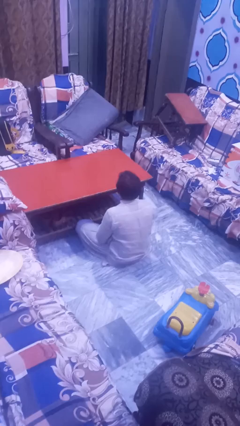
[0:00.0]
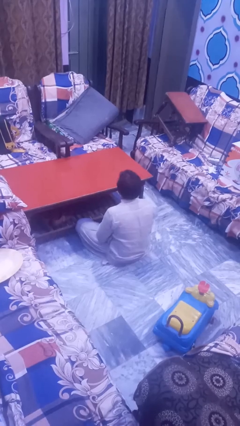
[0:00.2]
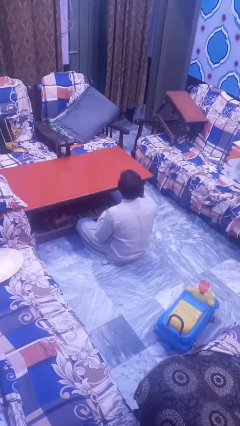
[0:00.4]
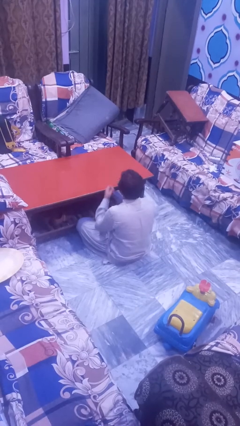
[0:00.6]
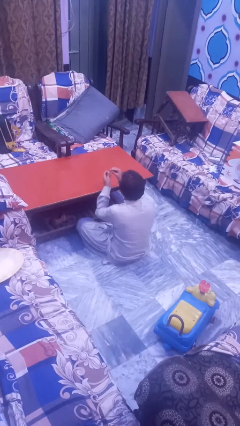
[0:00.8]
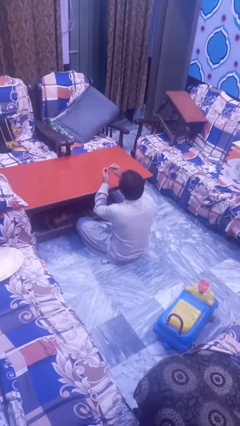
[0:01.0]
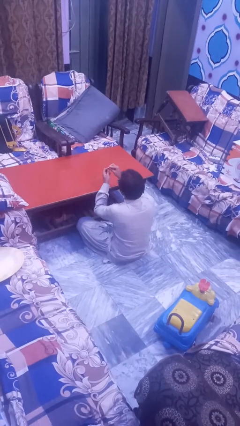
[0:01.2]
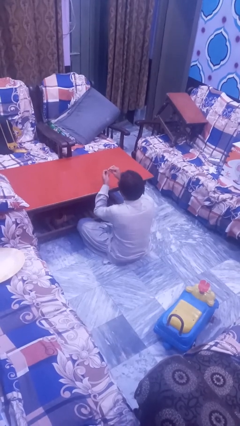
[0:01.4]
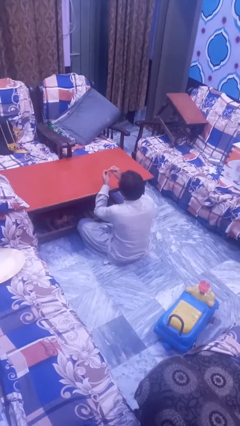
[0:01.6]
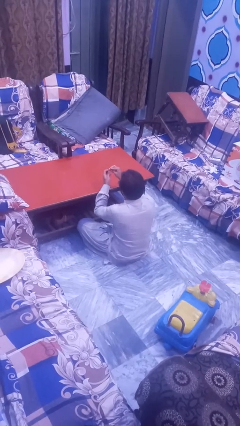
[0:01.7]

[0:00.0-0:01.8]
person files fingernails

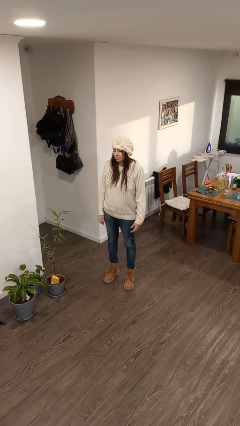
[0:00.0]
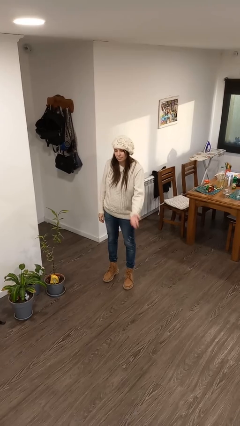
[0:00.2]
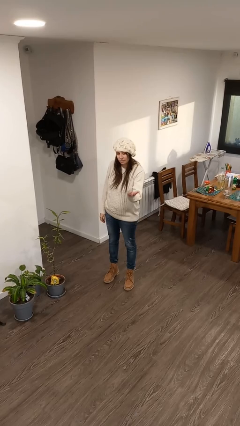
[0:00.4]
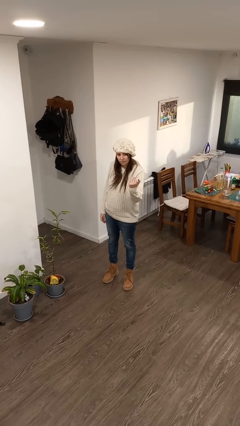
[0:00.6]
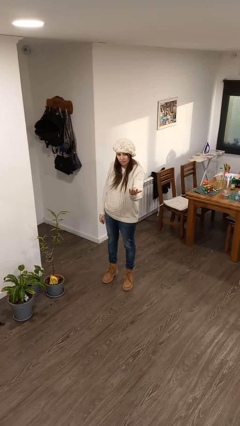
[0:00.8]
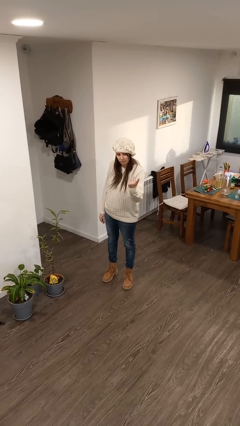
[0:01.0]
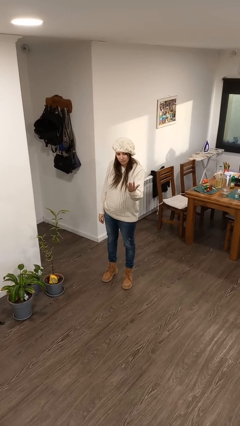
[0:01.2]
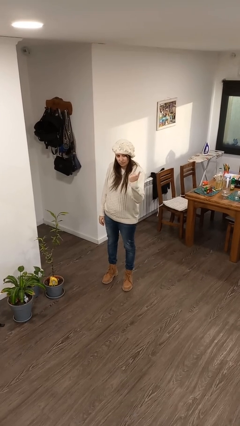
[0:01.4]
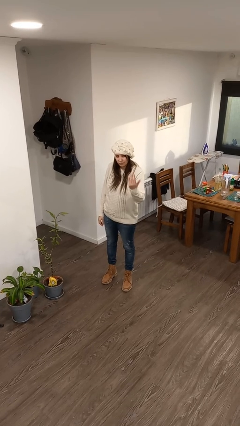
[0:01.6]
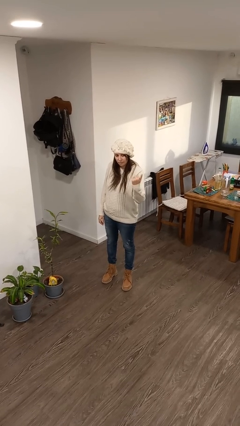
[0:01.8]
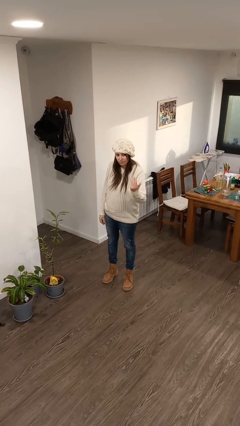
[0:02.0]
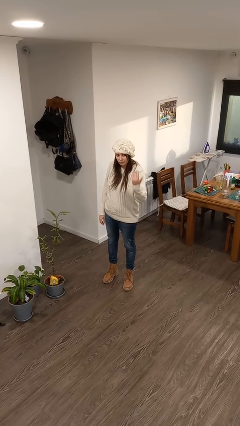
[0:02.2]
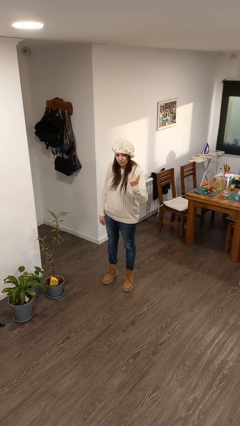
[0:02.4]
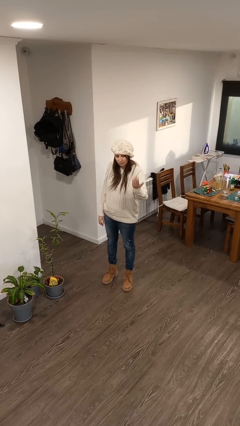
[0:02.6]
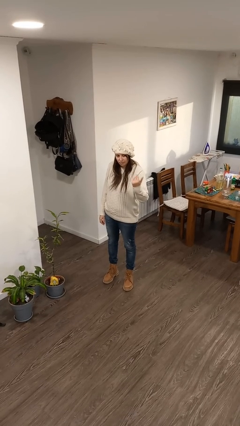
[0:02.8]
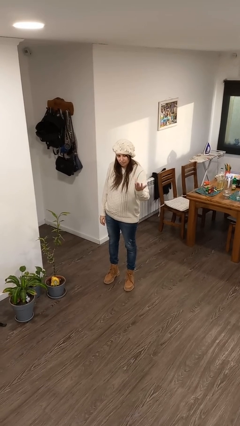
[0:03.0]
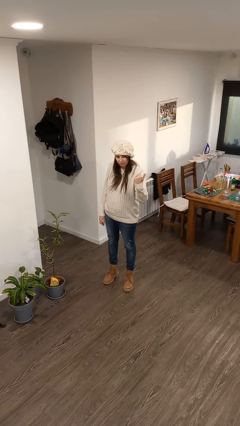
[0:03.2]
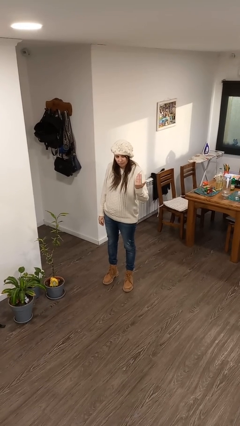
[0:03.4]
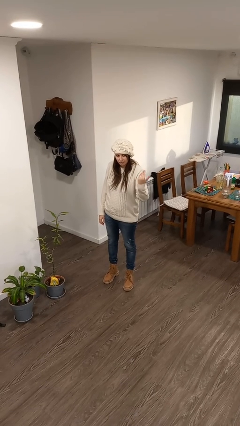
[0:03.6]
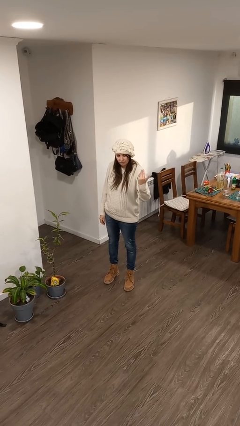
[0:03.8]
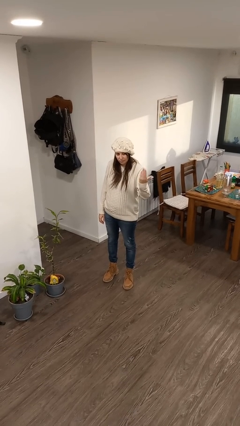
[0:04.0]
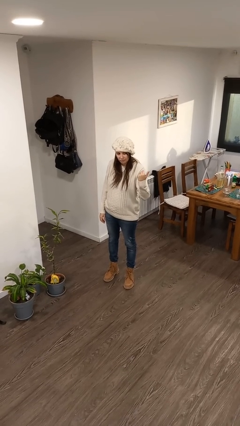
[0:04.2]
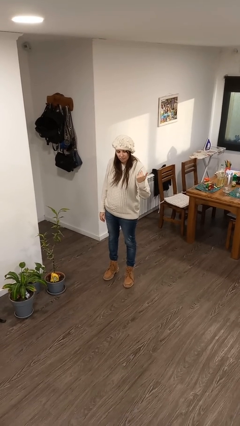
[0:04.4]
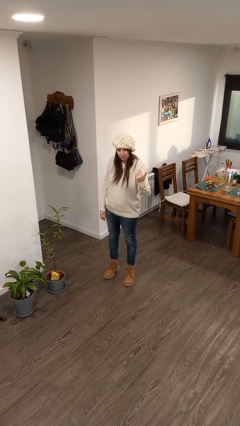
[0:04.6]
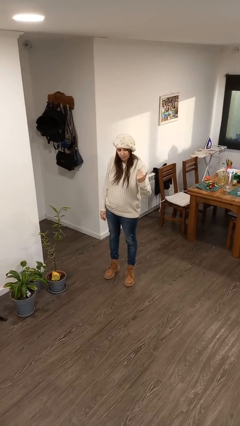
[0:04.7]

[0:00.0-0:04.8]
person gestures come here

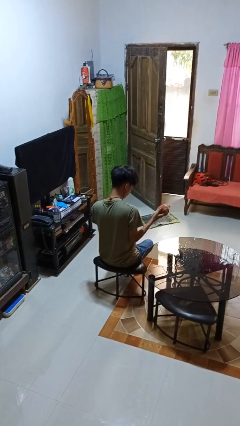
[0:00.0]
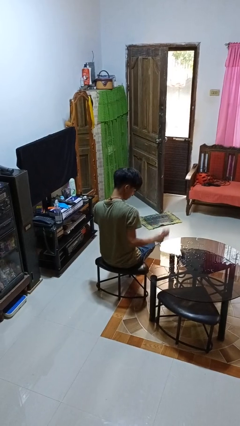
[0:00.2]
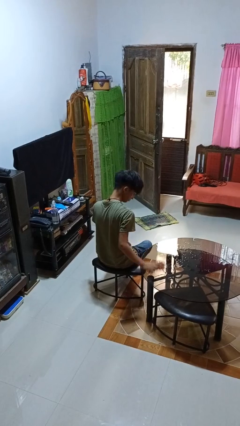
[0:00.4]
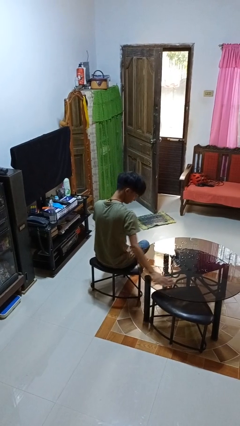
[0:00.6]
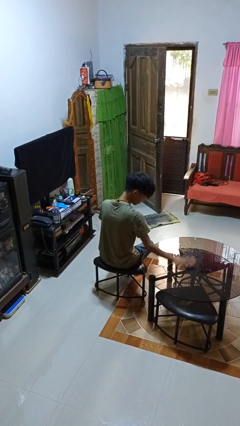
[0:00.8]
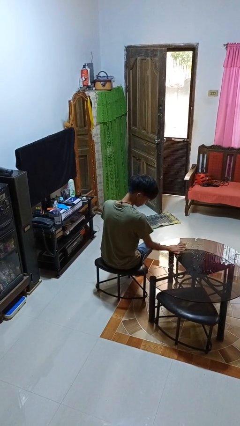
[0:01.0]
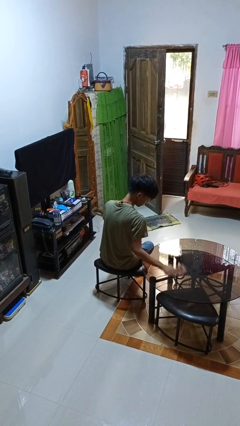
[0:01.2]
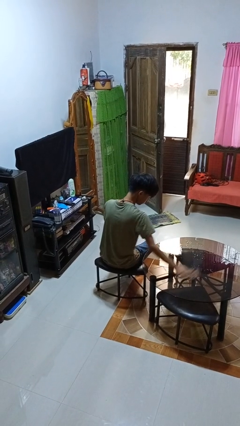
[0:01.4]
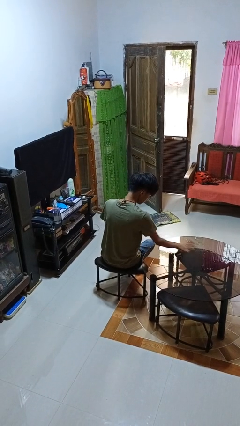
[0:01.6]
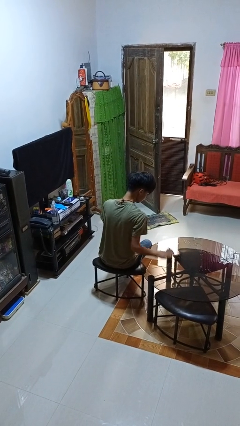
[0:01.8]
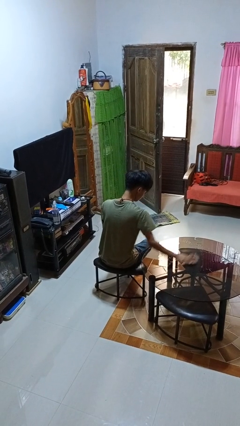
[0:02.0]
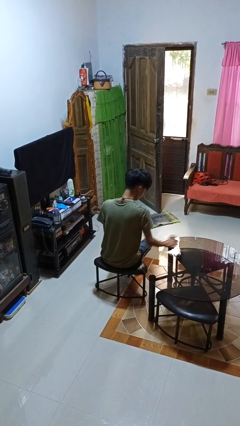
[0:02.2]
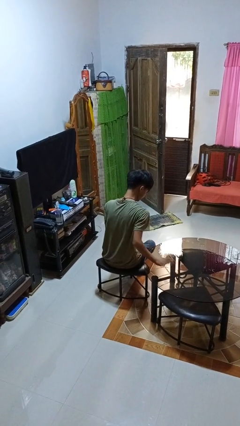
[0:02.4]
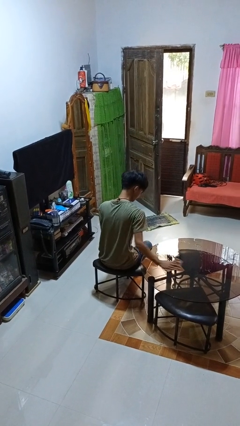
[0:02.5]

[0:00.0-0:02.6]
person cleans table with rag

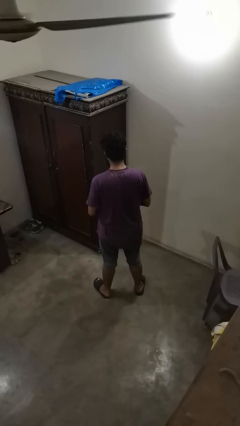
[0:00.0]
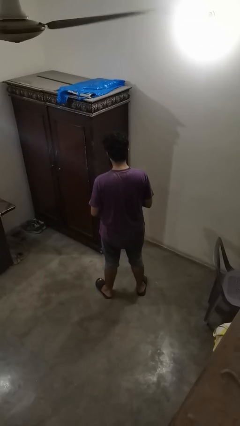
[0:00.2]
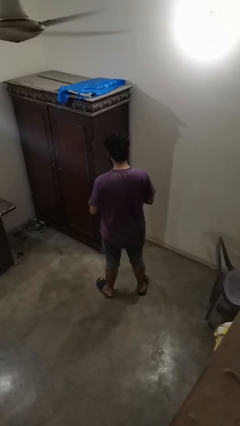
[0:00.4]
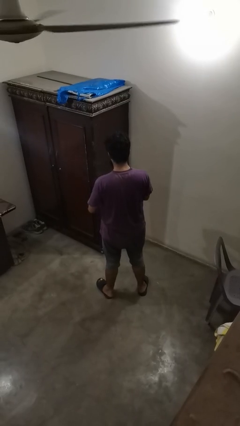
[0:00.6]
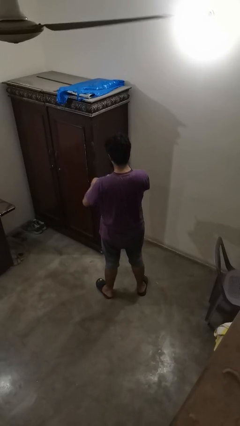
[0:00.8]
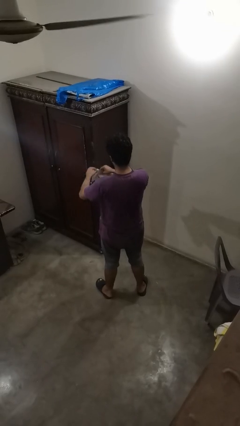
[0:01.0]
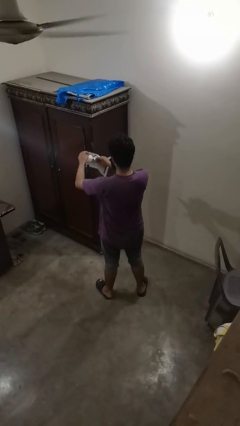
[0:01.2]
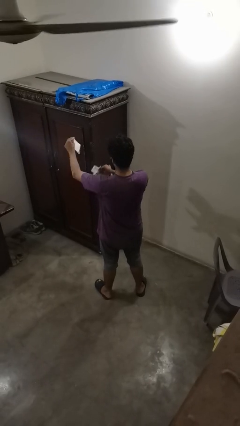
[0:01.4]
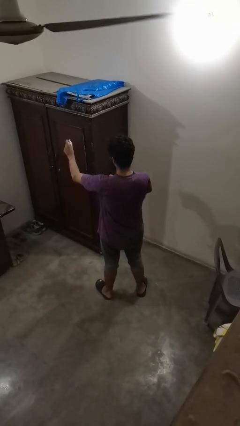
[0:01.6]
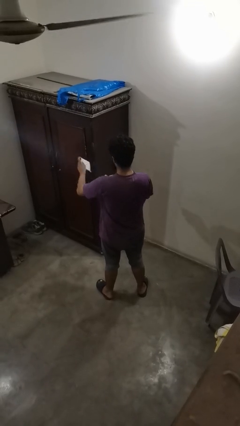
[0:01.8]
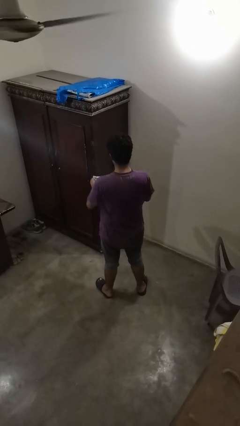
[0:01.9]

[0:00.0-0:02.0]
person tears paper

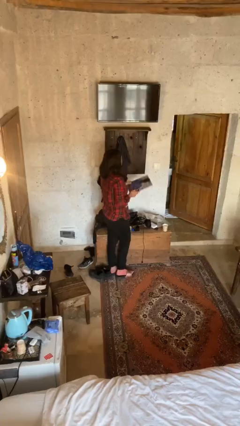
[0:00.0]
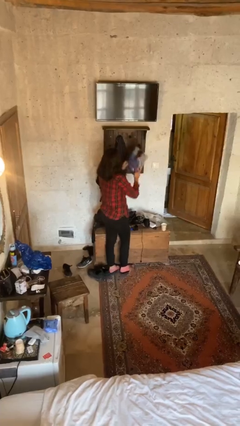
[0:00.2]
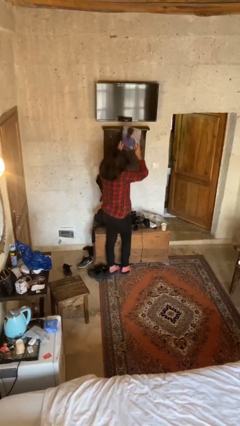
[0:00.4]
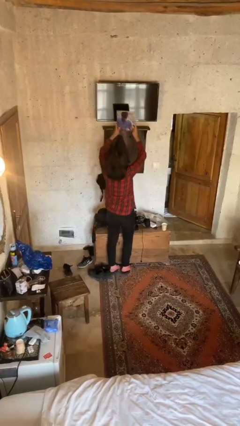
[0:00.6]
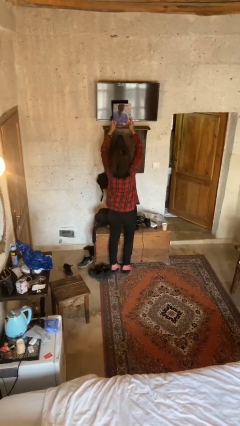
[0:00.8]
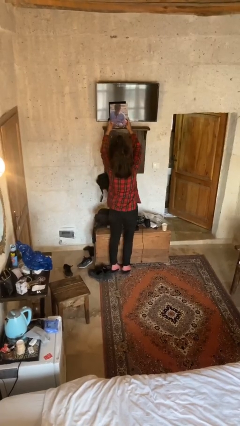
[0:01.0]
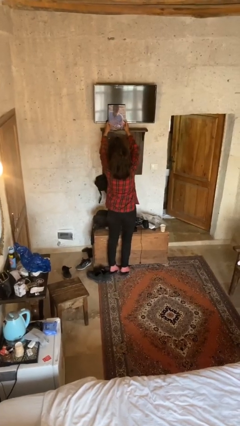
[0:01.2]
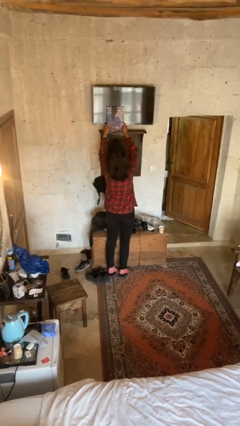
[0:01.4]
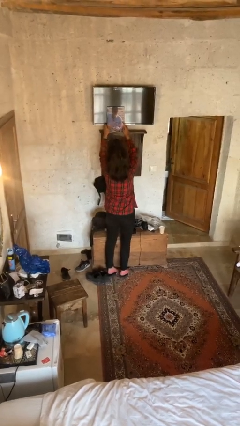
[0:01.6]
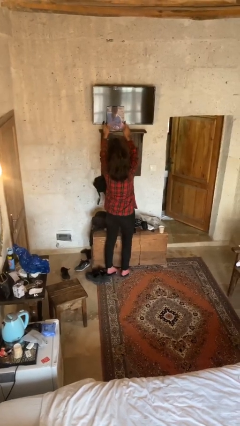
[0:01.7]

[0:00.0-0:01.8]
person puts down object on shelf

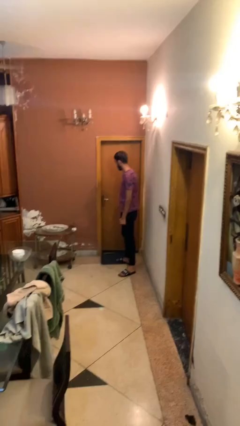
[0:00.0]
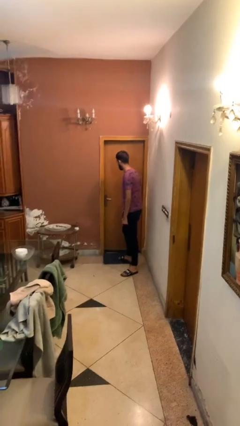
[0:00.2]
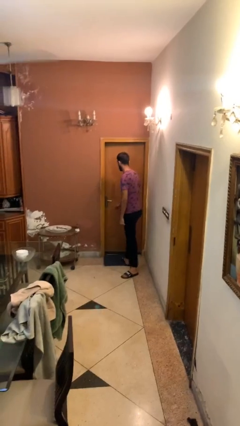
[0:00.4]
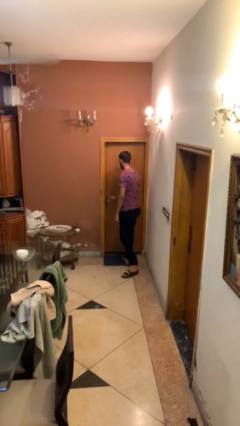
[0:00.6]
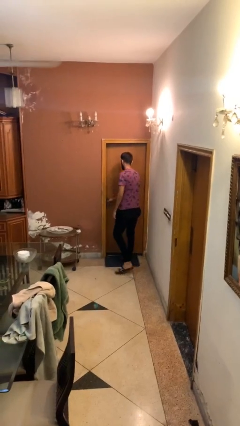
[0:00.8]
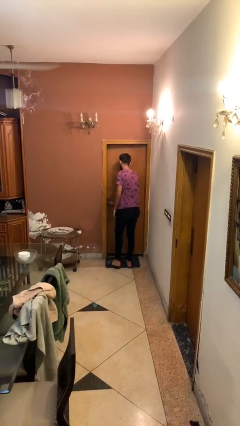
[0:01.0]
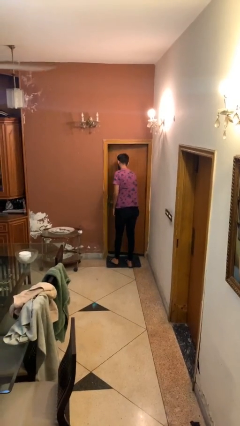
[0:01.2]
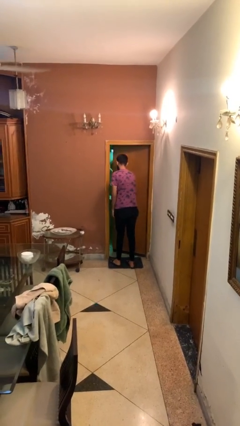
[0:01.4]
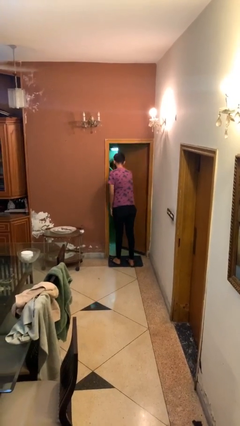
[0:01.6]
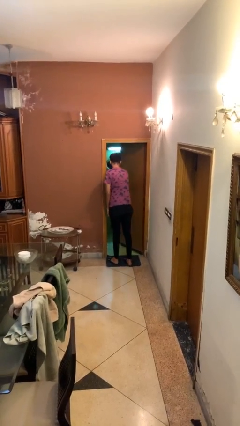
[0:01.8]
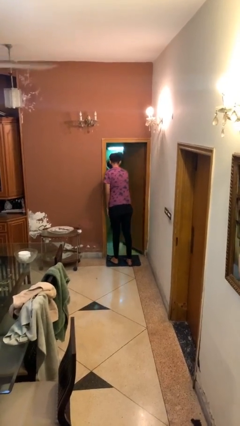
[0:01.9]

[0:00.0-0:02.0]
person opens facility door

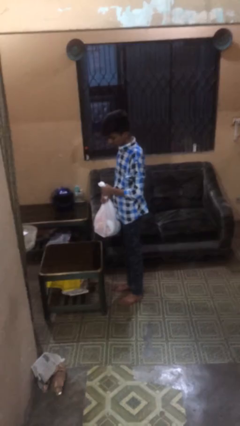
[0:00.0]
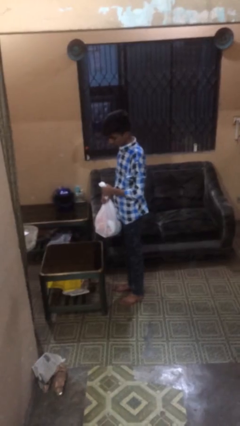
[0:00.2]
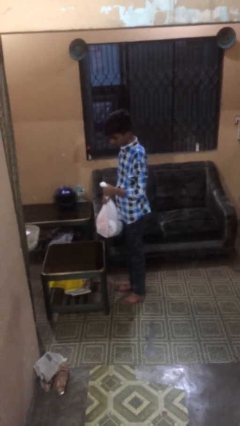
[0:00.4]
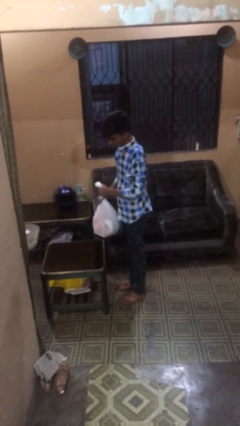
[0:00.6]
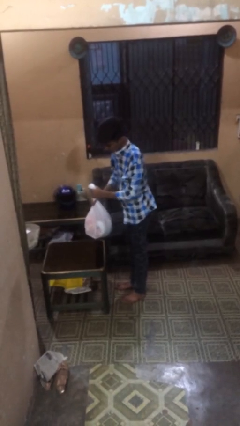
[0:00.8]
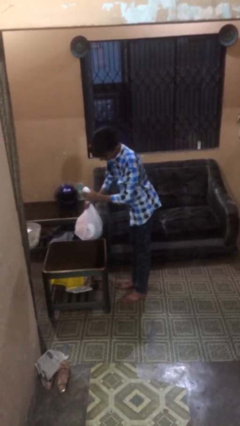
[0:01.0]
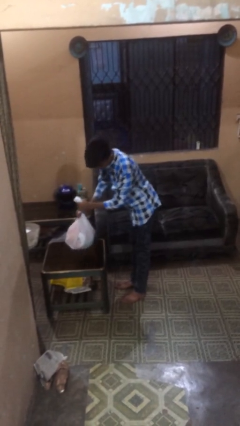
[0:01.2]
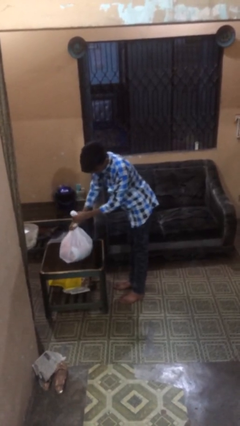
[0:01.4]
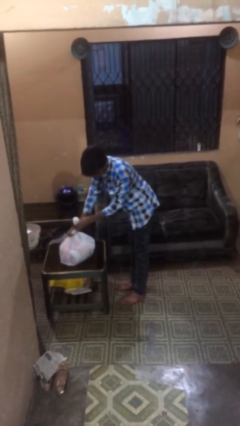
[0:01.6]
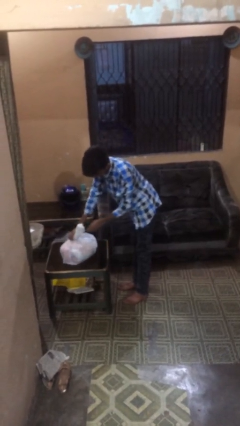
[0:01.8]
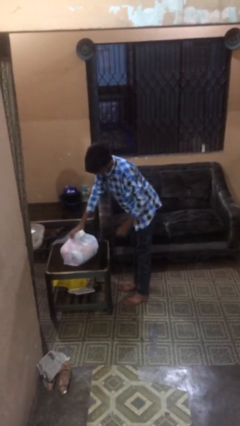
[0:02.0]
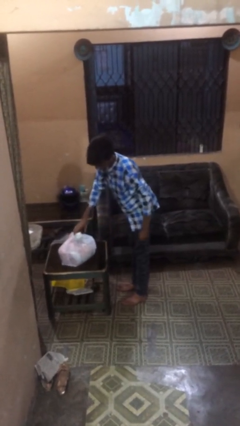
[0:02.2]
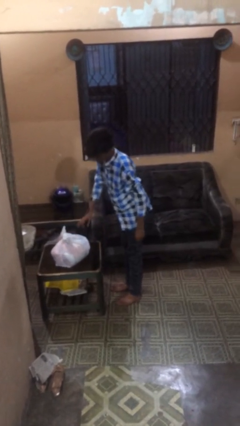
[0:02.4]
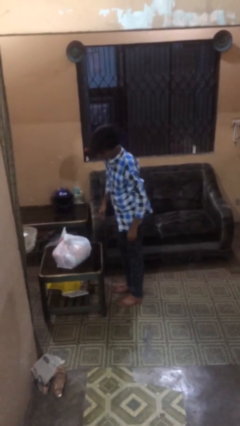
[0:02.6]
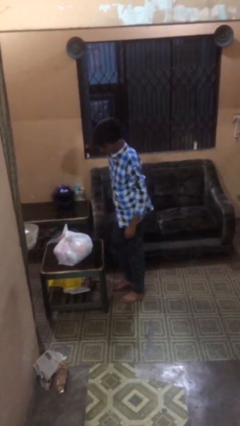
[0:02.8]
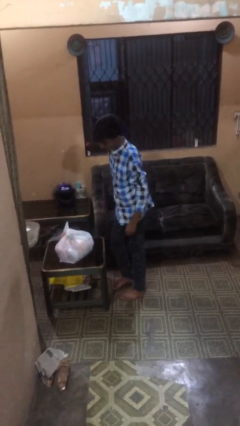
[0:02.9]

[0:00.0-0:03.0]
person puts down object on table
